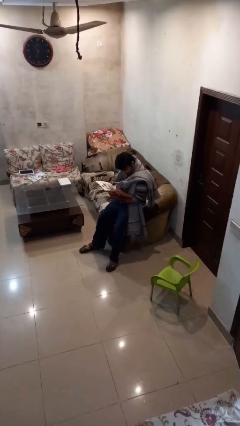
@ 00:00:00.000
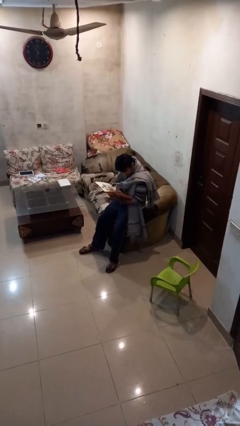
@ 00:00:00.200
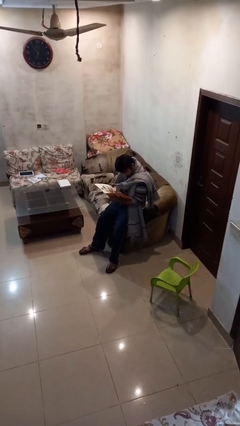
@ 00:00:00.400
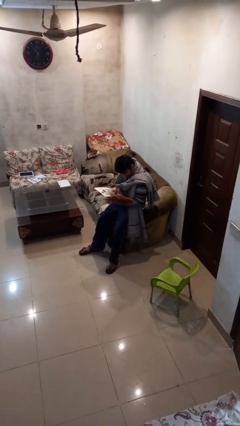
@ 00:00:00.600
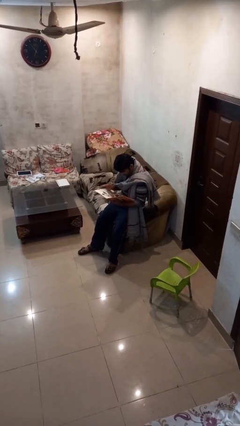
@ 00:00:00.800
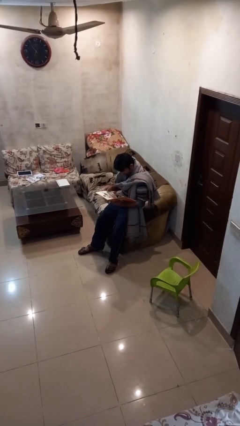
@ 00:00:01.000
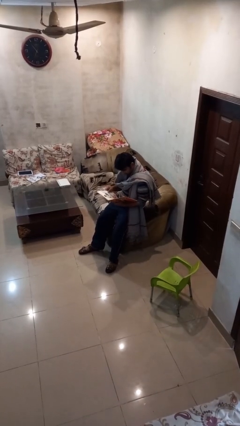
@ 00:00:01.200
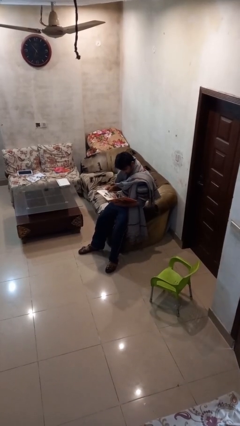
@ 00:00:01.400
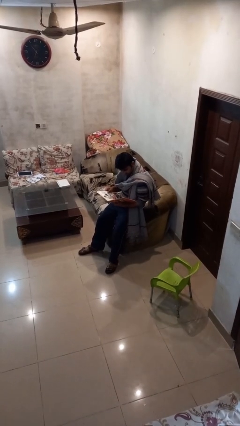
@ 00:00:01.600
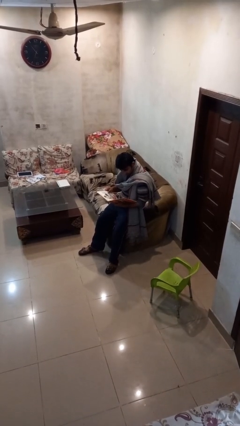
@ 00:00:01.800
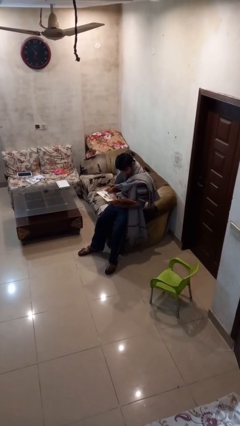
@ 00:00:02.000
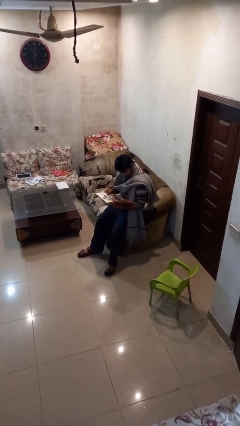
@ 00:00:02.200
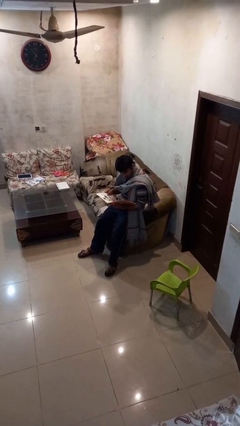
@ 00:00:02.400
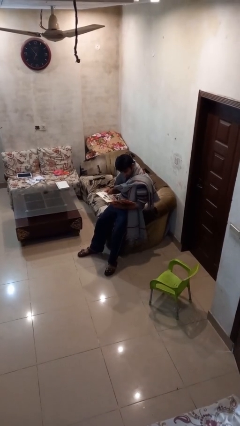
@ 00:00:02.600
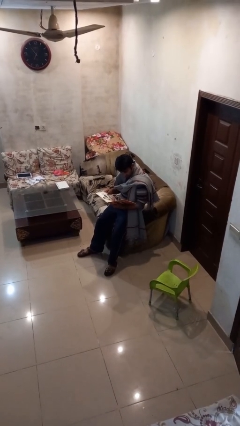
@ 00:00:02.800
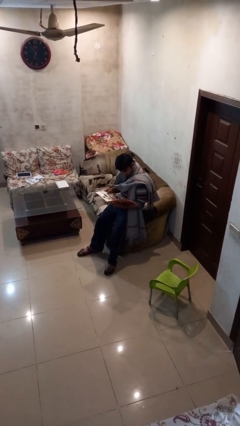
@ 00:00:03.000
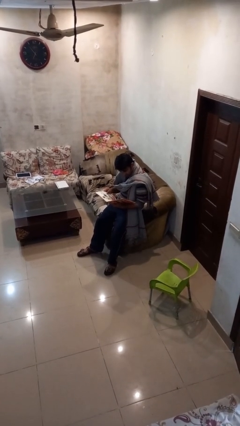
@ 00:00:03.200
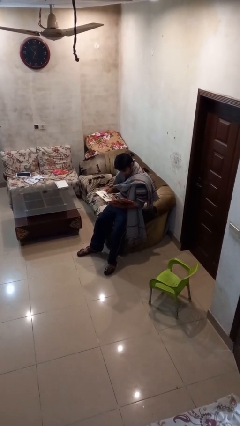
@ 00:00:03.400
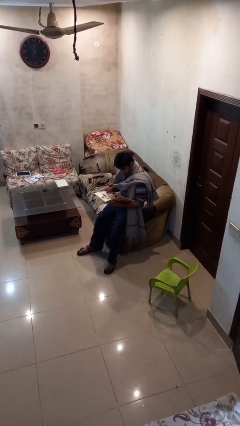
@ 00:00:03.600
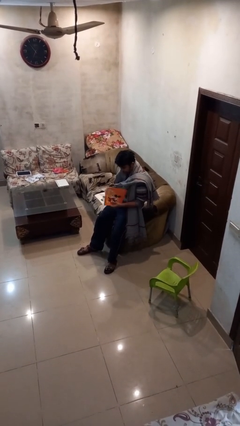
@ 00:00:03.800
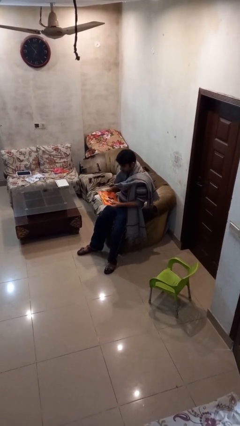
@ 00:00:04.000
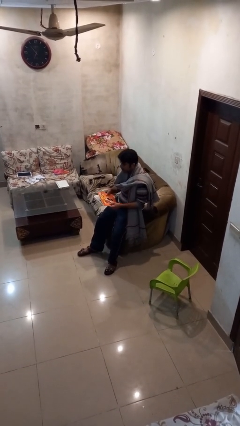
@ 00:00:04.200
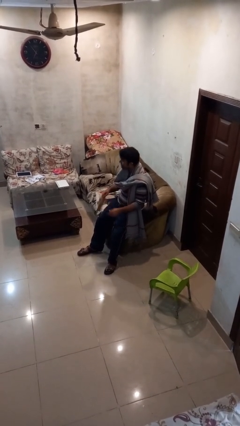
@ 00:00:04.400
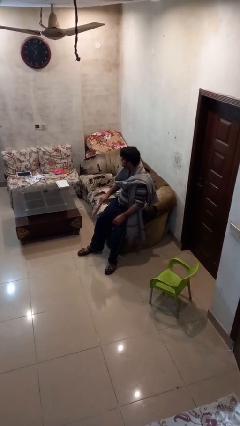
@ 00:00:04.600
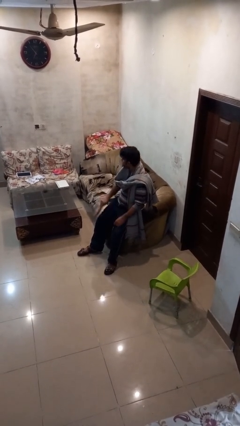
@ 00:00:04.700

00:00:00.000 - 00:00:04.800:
person reads document

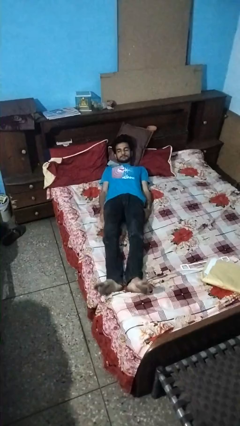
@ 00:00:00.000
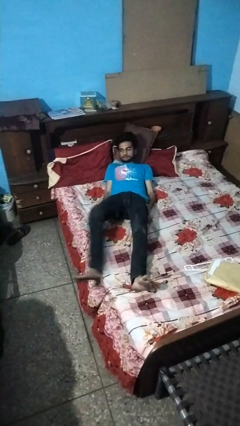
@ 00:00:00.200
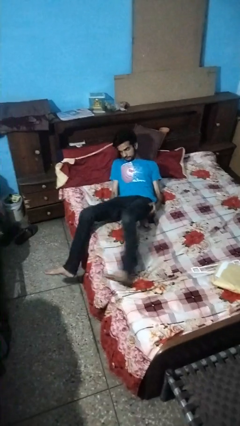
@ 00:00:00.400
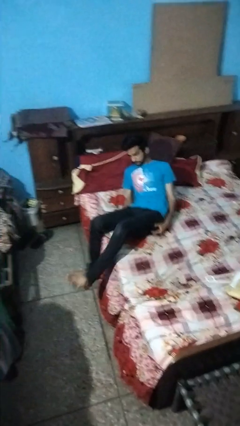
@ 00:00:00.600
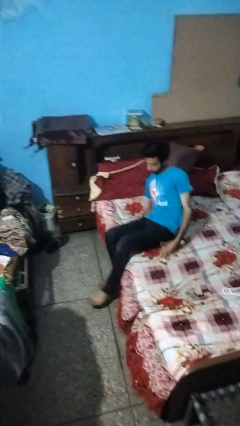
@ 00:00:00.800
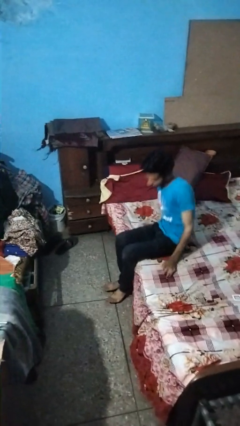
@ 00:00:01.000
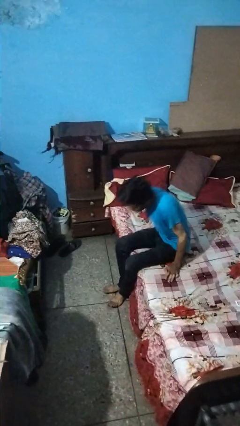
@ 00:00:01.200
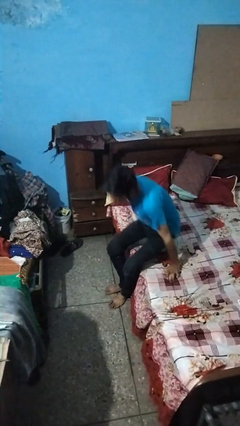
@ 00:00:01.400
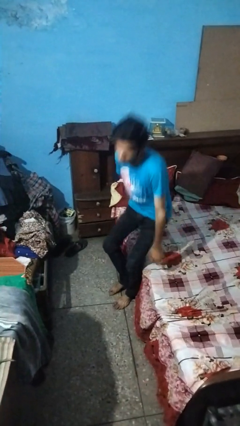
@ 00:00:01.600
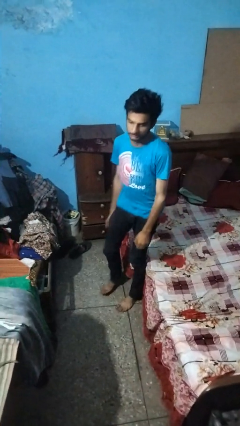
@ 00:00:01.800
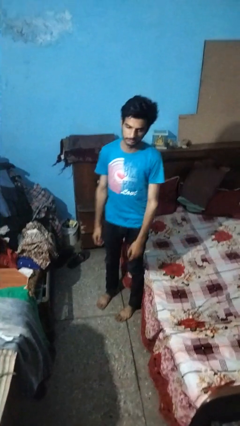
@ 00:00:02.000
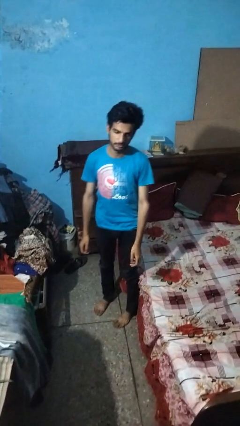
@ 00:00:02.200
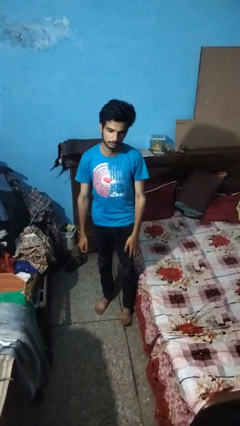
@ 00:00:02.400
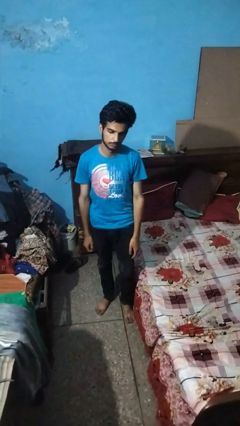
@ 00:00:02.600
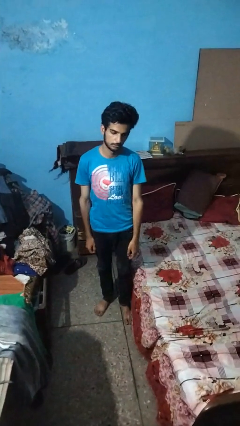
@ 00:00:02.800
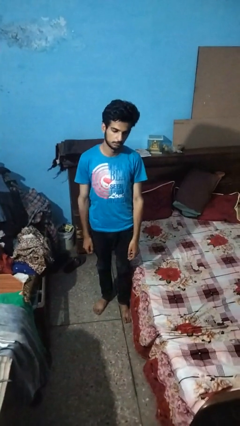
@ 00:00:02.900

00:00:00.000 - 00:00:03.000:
person stands up

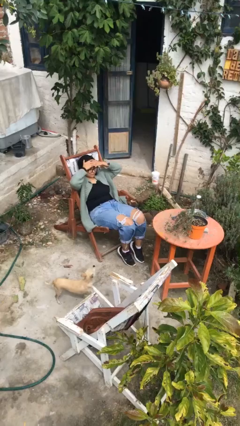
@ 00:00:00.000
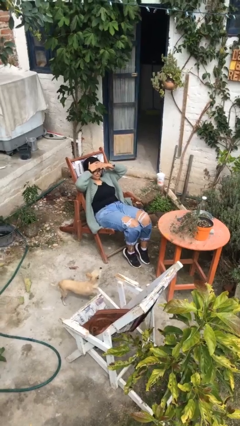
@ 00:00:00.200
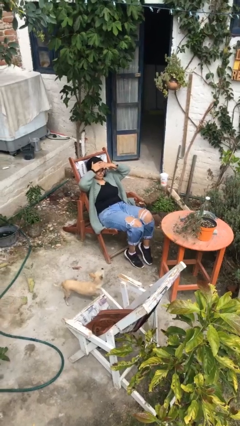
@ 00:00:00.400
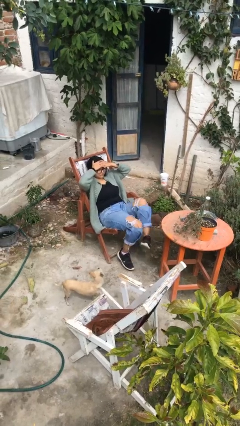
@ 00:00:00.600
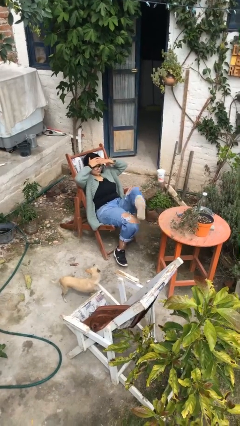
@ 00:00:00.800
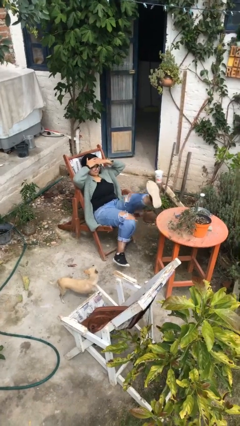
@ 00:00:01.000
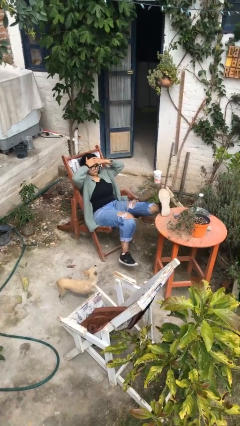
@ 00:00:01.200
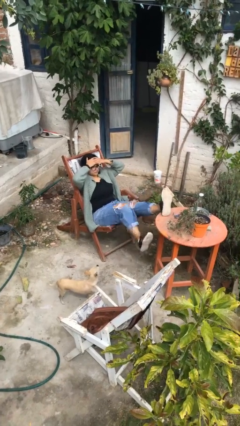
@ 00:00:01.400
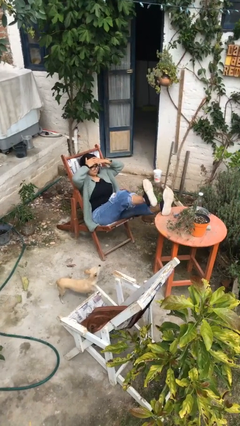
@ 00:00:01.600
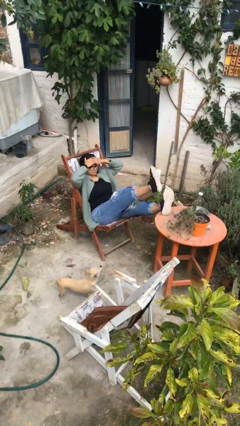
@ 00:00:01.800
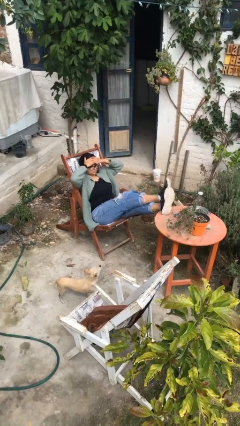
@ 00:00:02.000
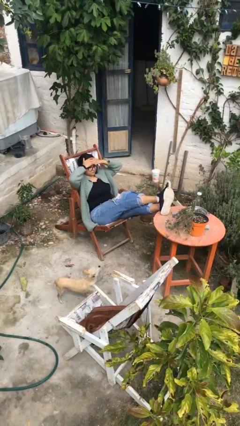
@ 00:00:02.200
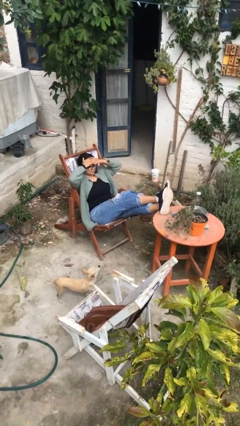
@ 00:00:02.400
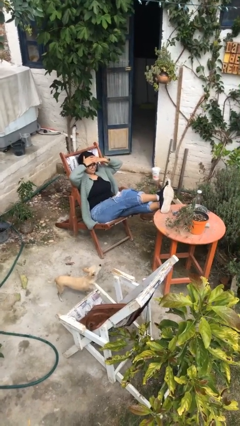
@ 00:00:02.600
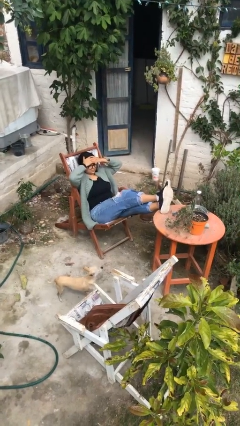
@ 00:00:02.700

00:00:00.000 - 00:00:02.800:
person puts feet up

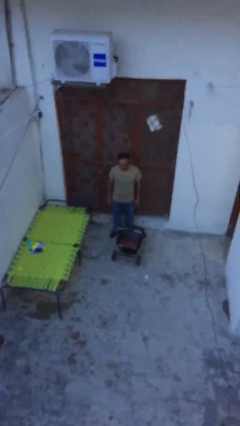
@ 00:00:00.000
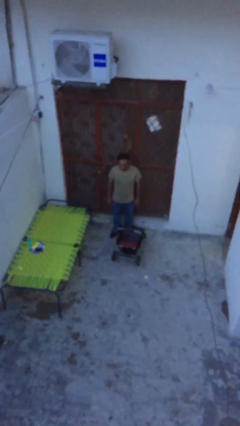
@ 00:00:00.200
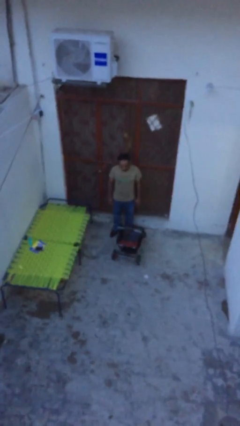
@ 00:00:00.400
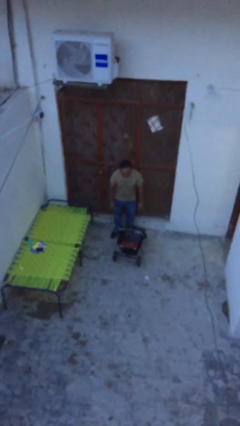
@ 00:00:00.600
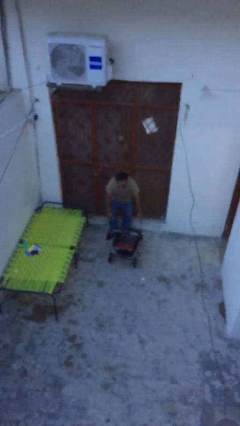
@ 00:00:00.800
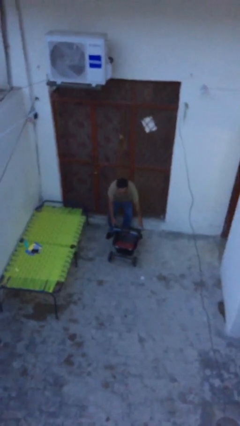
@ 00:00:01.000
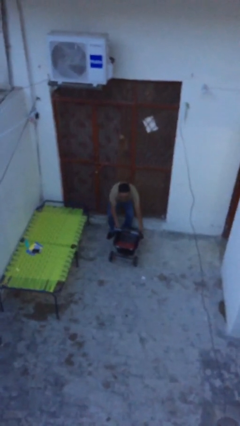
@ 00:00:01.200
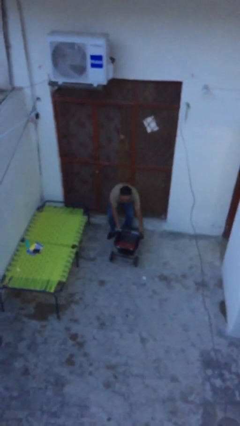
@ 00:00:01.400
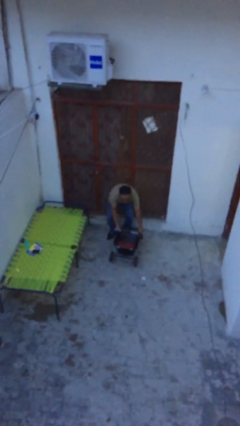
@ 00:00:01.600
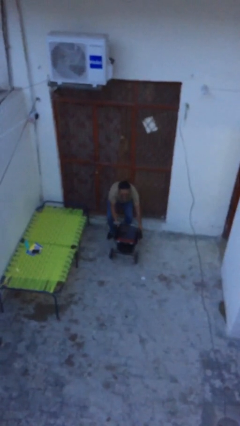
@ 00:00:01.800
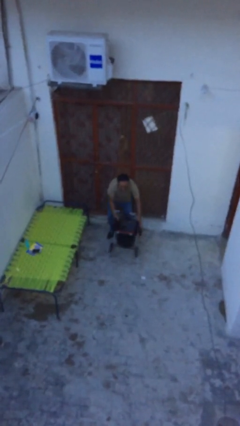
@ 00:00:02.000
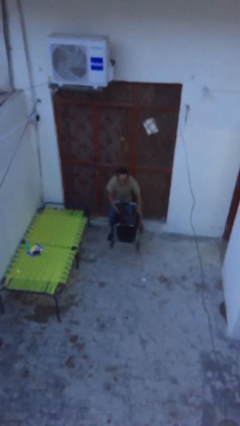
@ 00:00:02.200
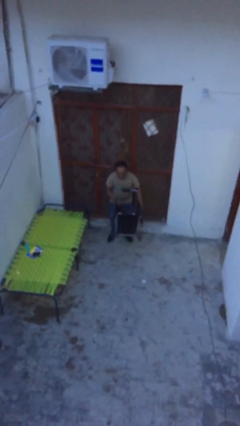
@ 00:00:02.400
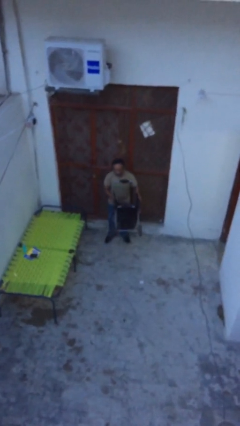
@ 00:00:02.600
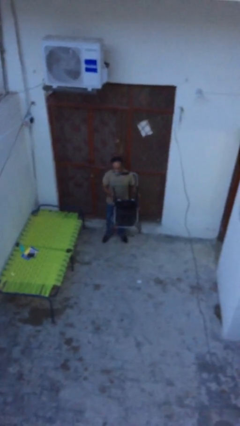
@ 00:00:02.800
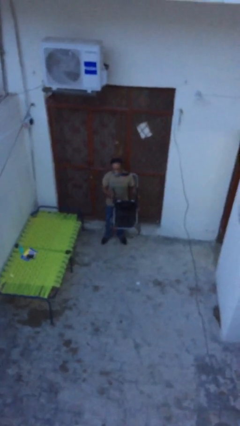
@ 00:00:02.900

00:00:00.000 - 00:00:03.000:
person picks up object from floor

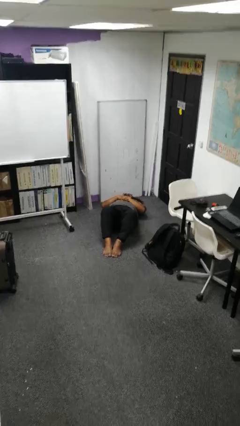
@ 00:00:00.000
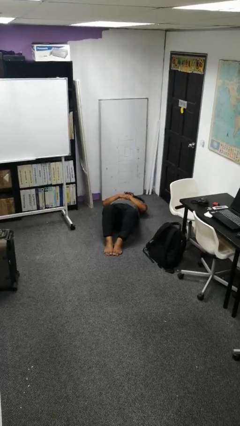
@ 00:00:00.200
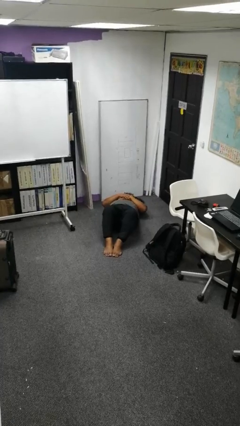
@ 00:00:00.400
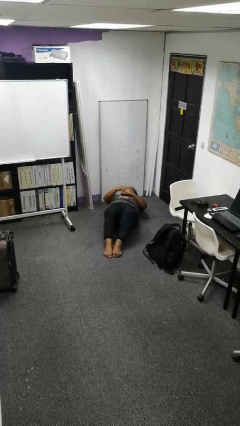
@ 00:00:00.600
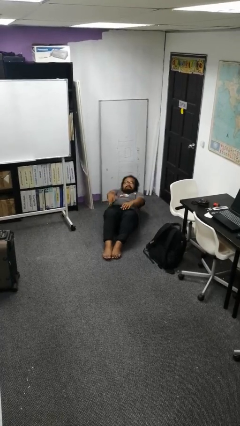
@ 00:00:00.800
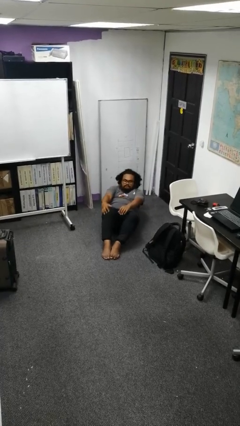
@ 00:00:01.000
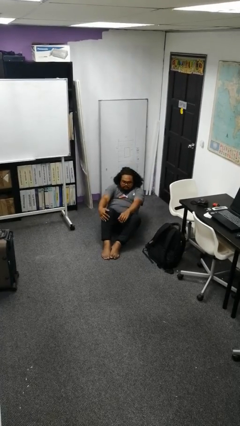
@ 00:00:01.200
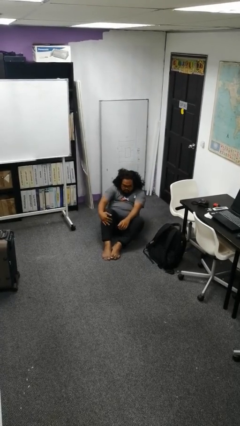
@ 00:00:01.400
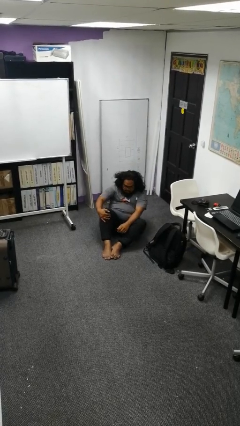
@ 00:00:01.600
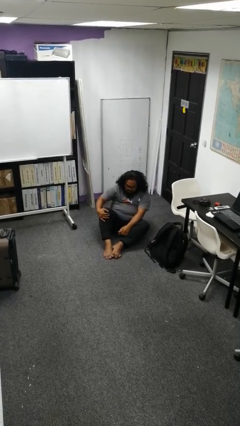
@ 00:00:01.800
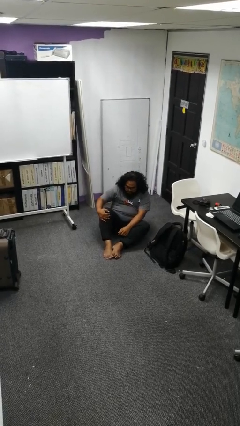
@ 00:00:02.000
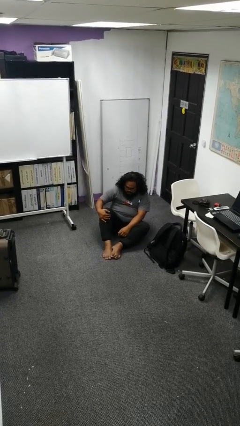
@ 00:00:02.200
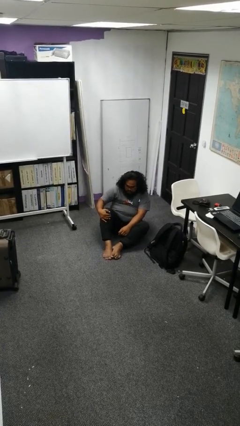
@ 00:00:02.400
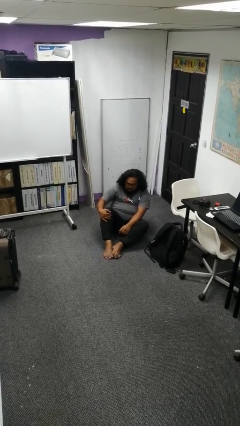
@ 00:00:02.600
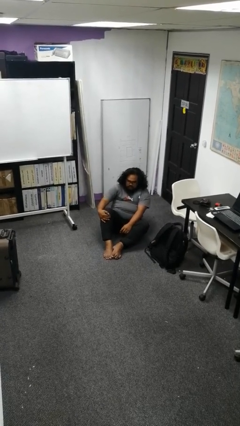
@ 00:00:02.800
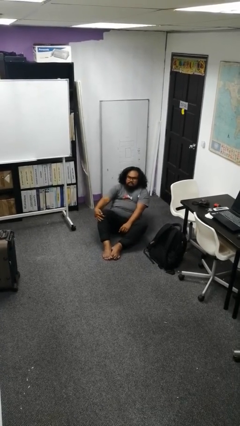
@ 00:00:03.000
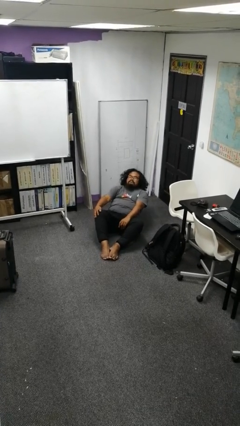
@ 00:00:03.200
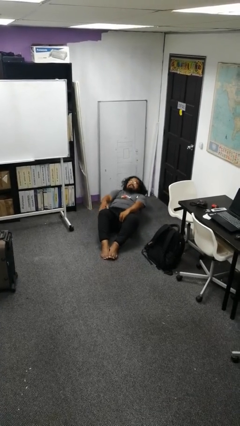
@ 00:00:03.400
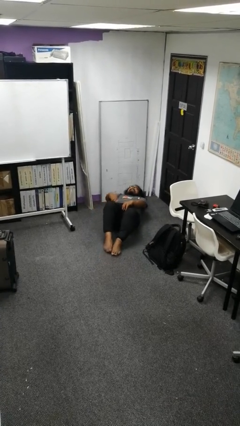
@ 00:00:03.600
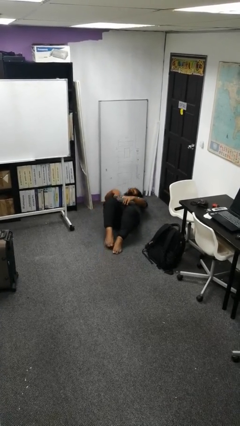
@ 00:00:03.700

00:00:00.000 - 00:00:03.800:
person exercises with situp
